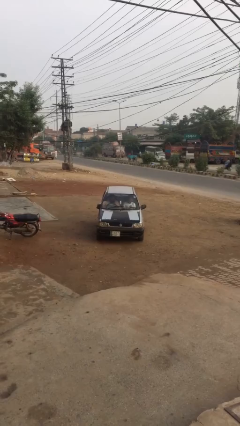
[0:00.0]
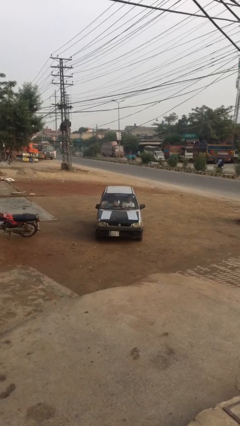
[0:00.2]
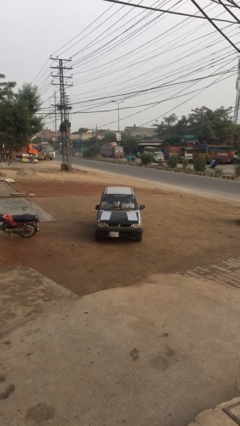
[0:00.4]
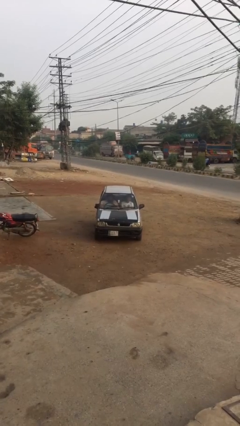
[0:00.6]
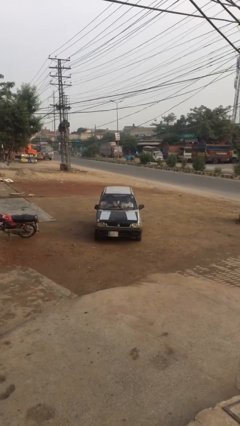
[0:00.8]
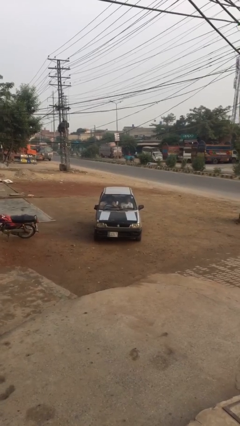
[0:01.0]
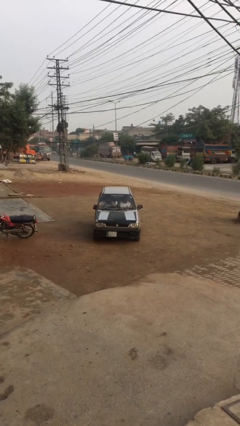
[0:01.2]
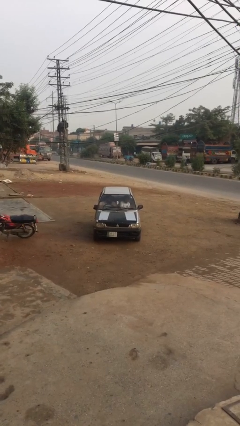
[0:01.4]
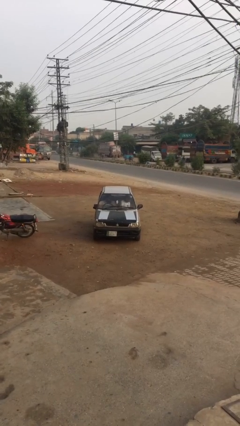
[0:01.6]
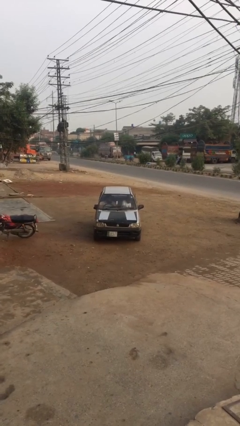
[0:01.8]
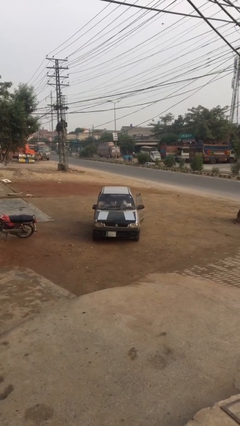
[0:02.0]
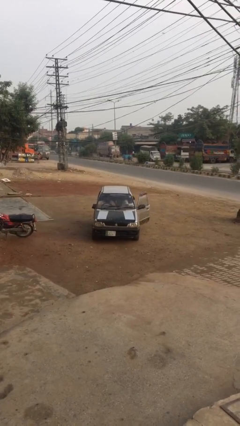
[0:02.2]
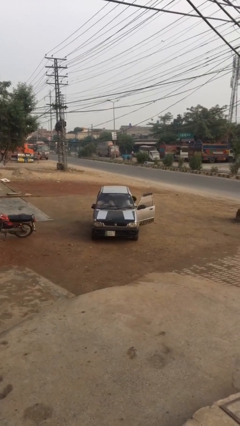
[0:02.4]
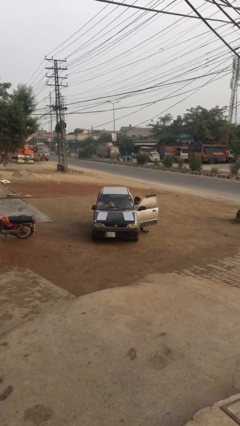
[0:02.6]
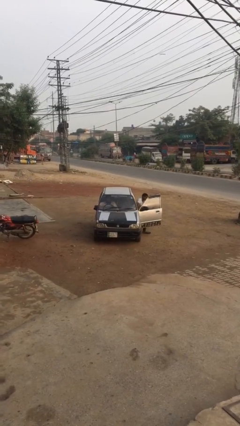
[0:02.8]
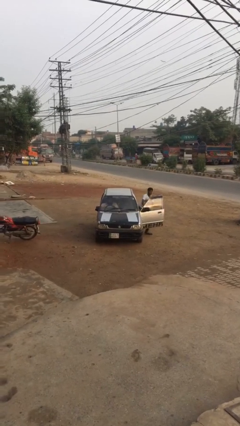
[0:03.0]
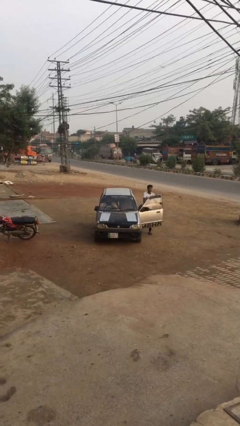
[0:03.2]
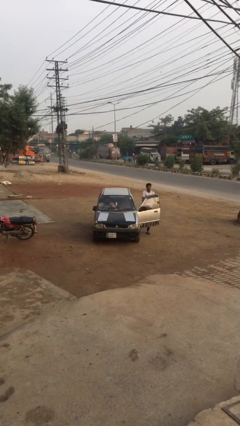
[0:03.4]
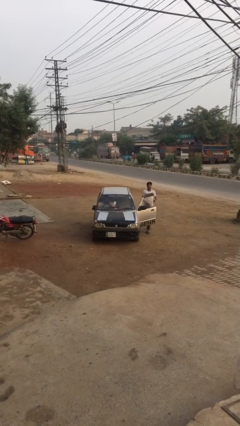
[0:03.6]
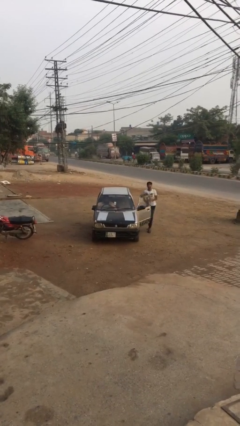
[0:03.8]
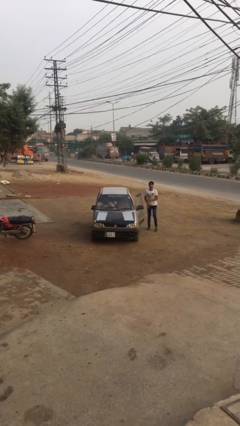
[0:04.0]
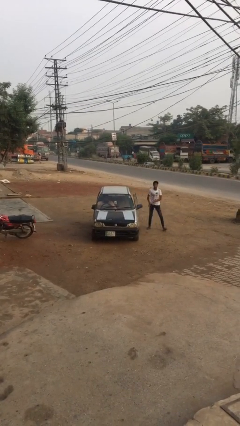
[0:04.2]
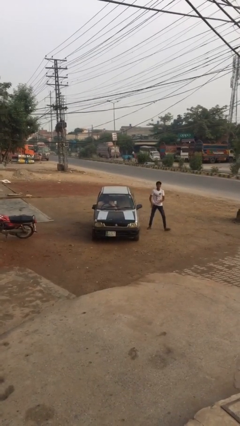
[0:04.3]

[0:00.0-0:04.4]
car drops off person

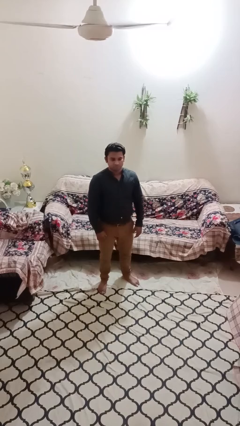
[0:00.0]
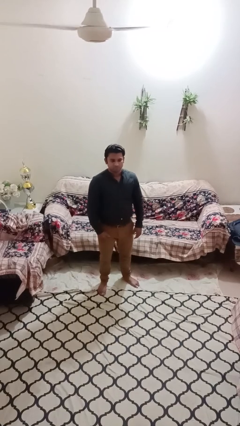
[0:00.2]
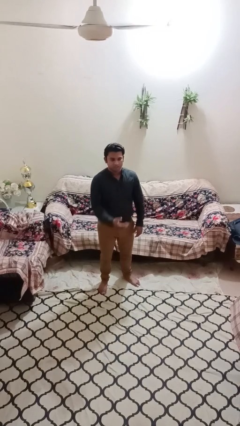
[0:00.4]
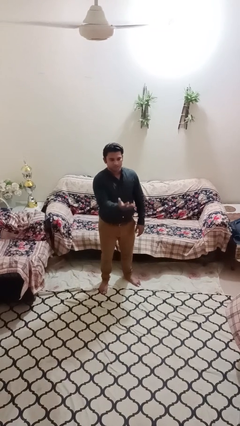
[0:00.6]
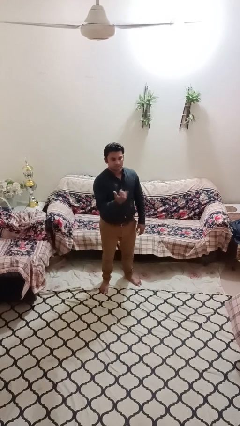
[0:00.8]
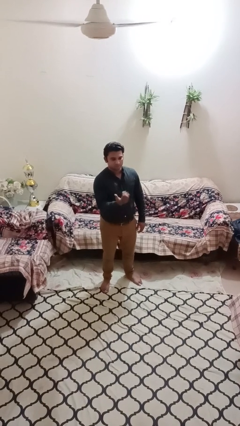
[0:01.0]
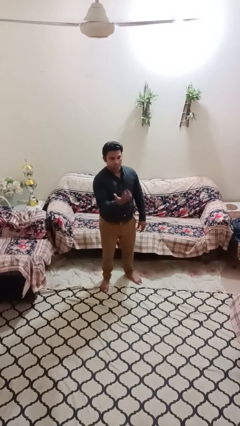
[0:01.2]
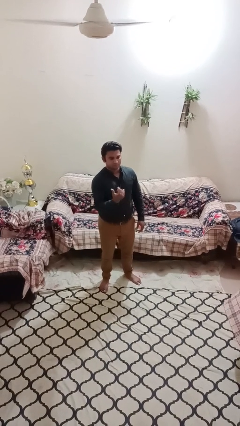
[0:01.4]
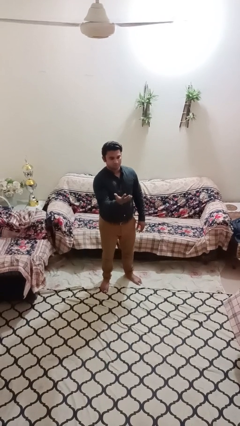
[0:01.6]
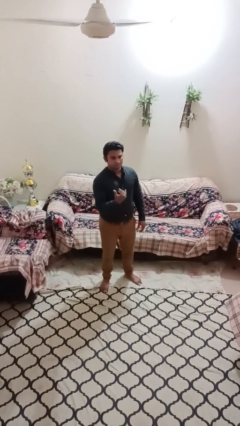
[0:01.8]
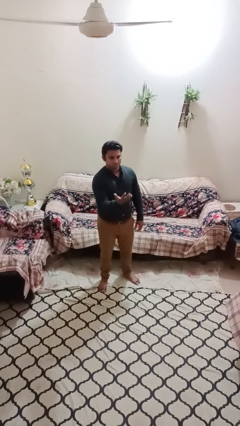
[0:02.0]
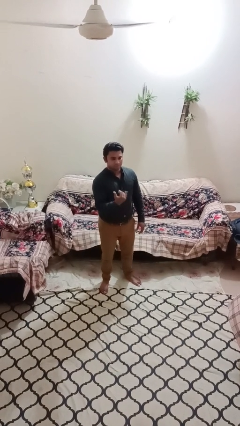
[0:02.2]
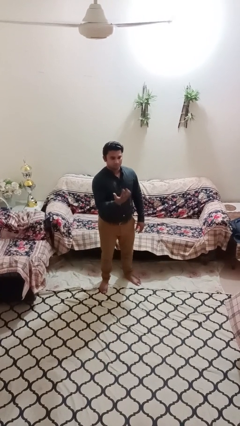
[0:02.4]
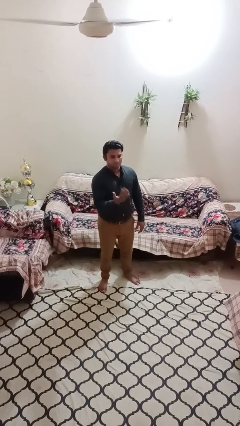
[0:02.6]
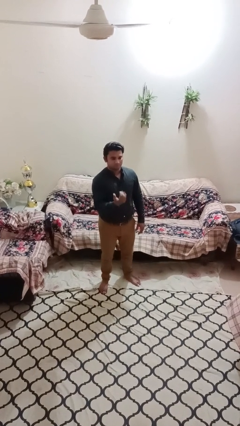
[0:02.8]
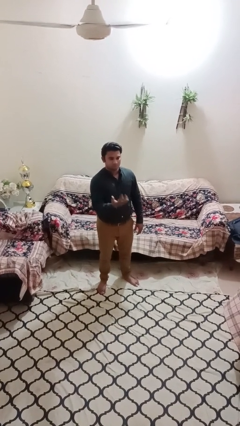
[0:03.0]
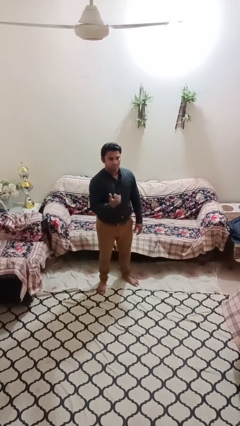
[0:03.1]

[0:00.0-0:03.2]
person gestures come here

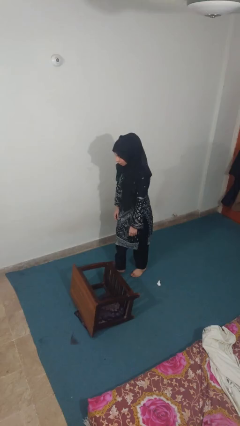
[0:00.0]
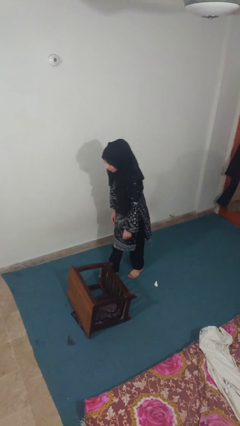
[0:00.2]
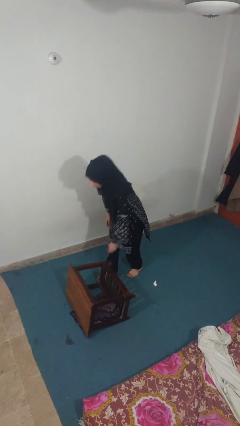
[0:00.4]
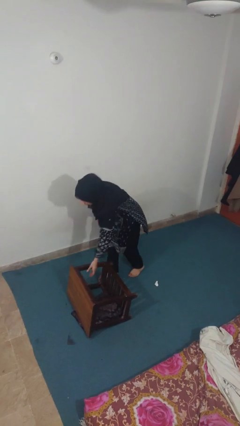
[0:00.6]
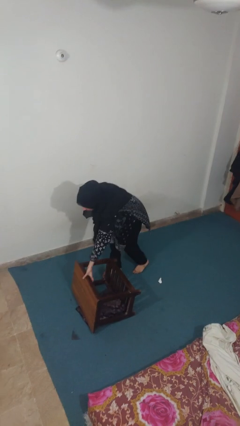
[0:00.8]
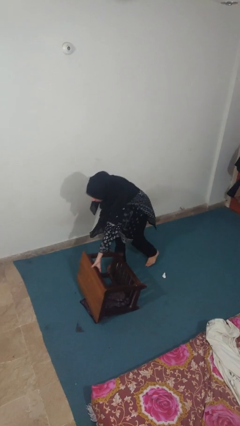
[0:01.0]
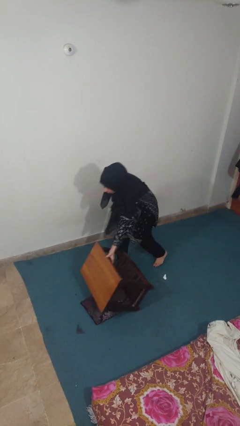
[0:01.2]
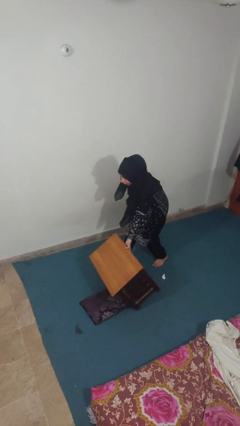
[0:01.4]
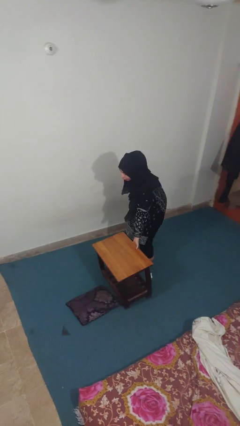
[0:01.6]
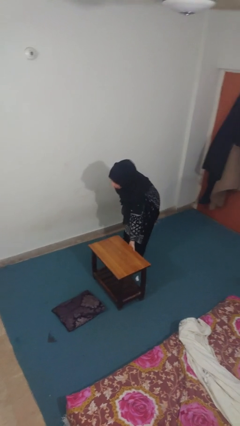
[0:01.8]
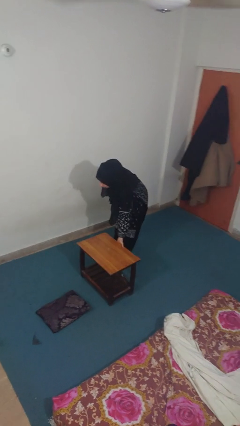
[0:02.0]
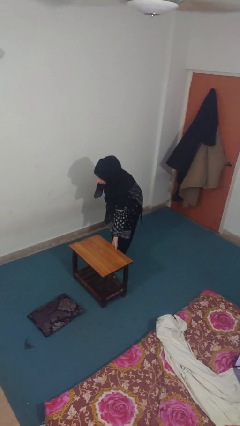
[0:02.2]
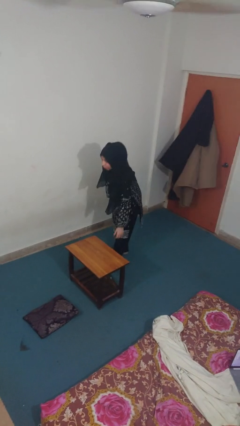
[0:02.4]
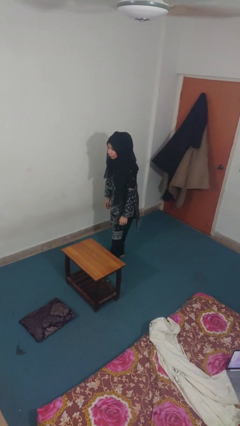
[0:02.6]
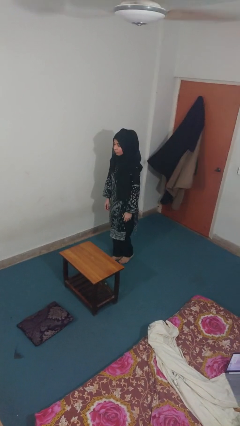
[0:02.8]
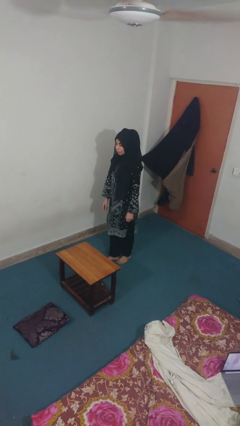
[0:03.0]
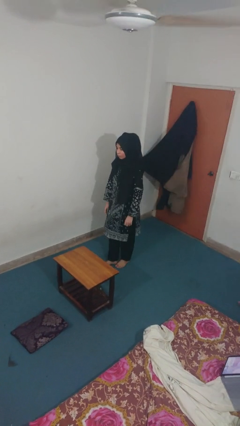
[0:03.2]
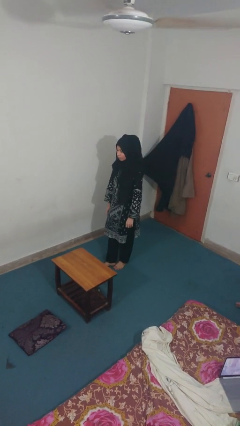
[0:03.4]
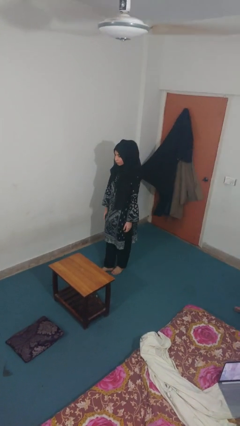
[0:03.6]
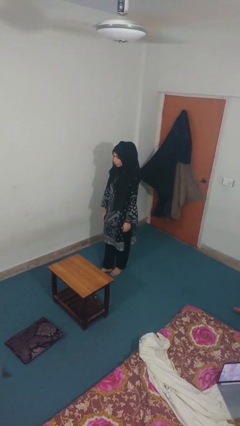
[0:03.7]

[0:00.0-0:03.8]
person sets upright furniture

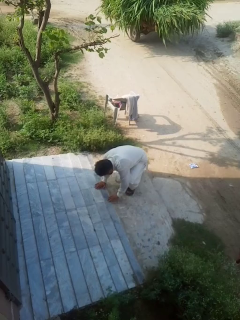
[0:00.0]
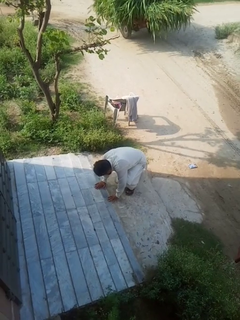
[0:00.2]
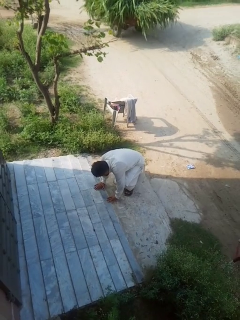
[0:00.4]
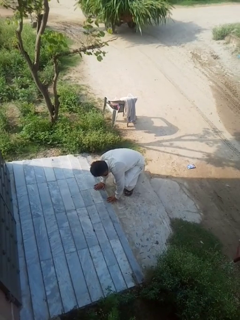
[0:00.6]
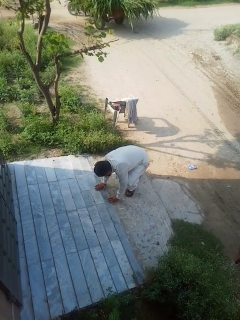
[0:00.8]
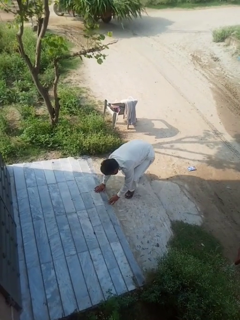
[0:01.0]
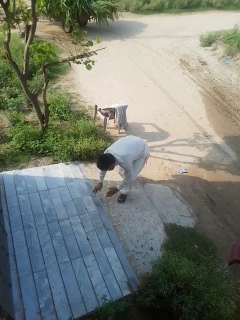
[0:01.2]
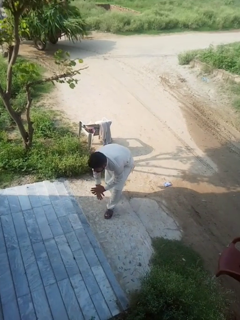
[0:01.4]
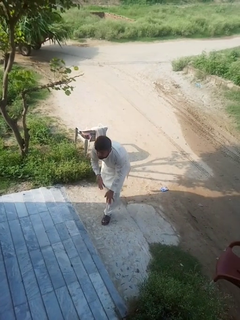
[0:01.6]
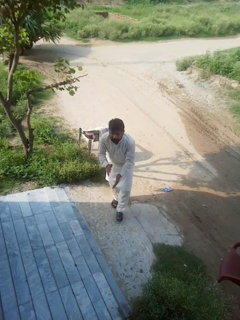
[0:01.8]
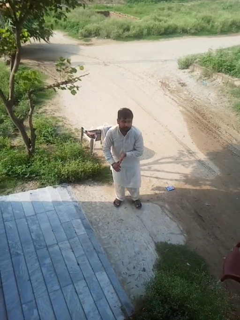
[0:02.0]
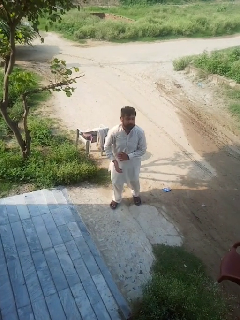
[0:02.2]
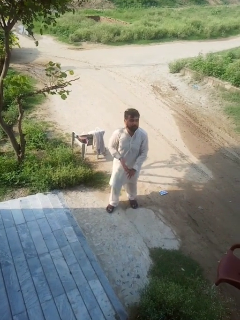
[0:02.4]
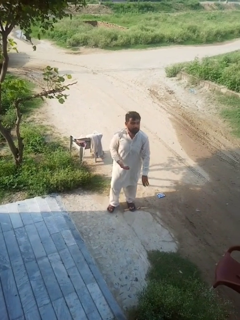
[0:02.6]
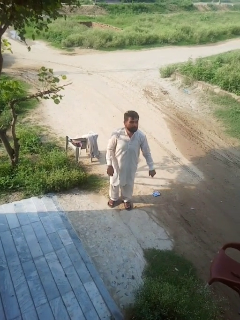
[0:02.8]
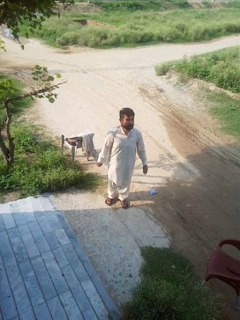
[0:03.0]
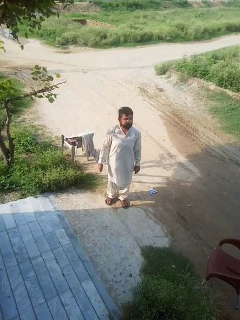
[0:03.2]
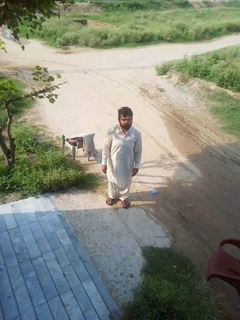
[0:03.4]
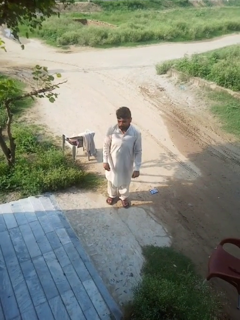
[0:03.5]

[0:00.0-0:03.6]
person stands up from floor

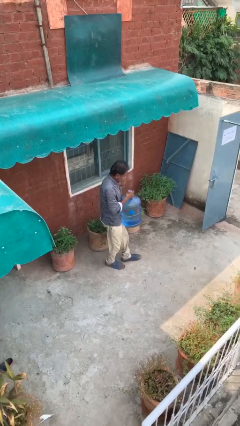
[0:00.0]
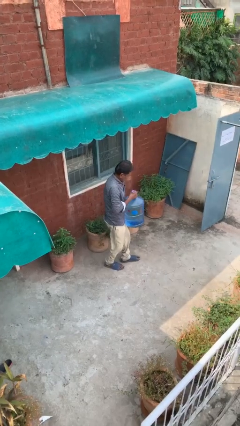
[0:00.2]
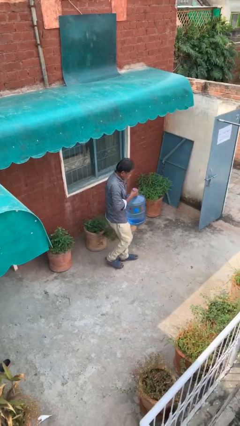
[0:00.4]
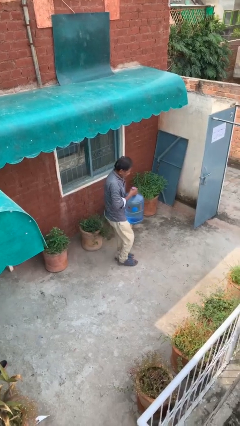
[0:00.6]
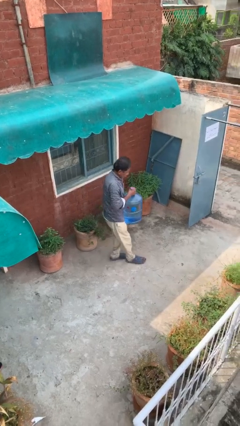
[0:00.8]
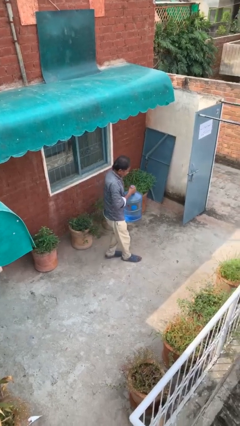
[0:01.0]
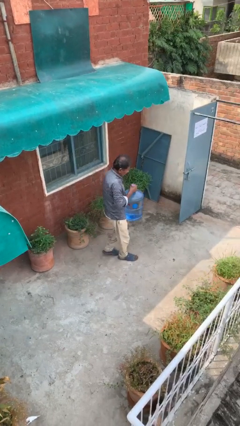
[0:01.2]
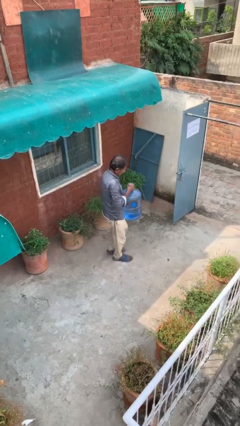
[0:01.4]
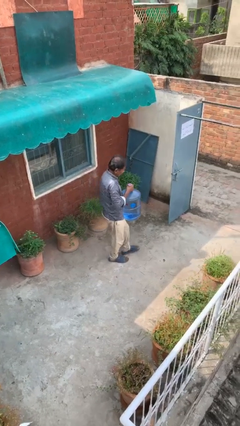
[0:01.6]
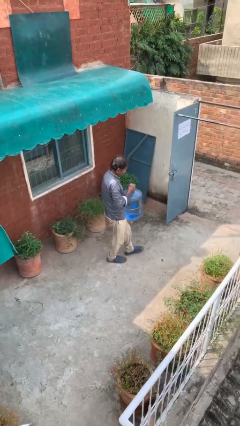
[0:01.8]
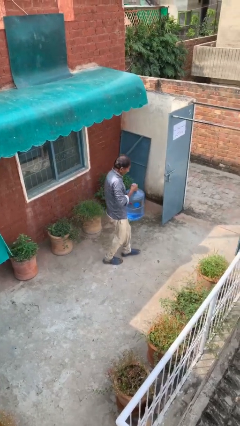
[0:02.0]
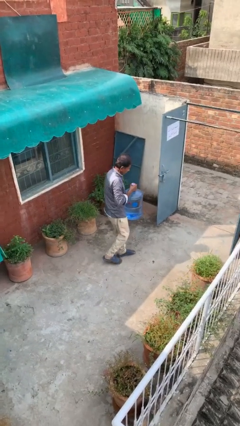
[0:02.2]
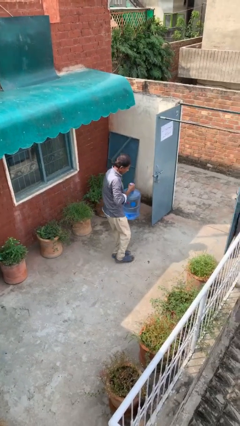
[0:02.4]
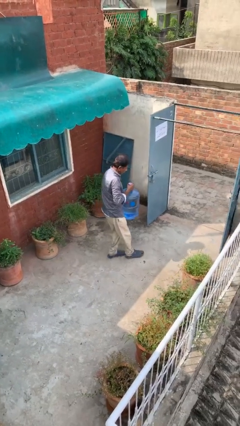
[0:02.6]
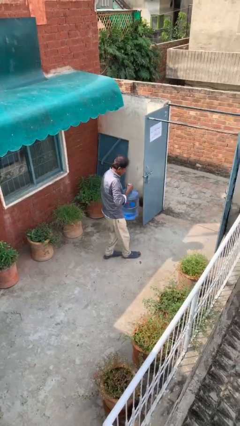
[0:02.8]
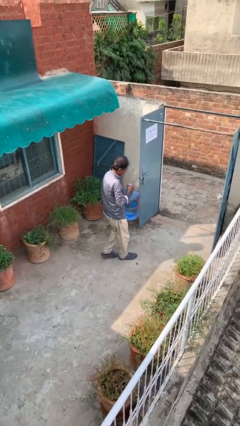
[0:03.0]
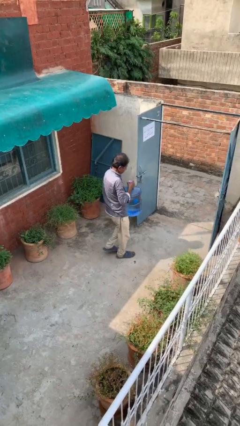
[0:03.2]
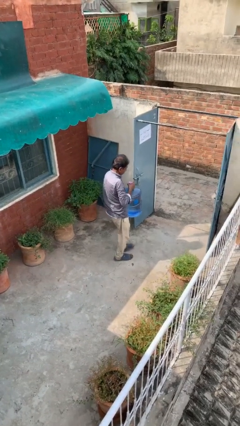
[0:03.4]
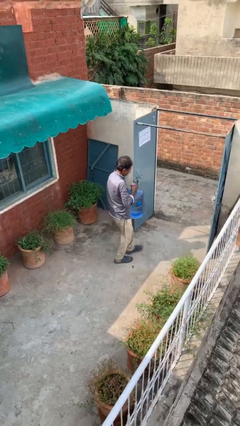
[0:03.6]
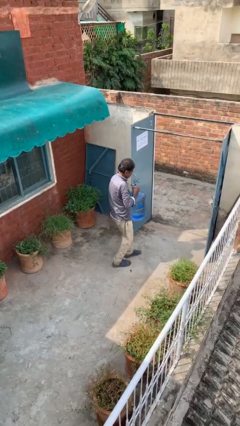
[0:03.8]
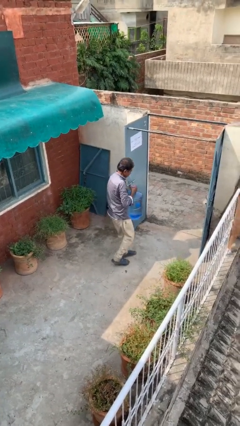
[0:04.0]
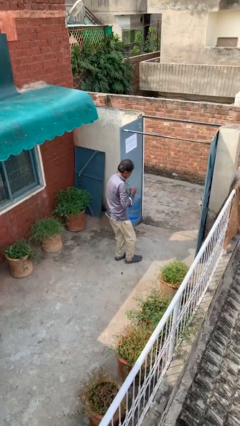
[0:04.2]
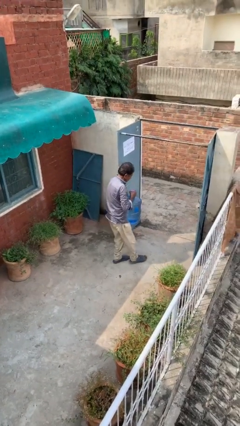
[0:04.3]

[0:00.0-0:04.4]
person carries heavy object
